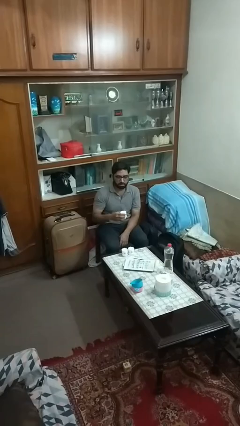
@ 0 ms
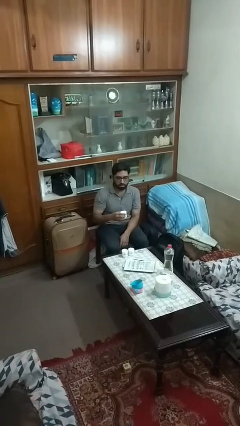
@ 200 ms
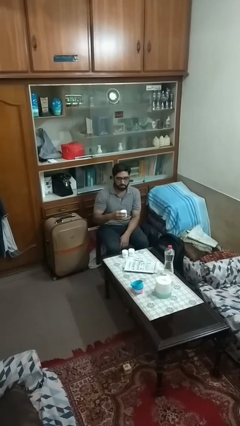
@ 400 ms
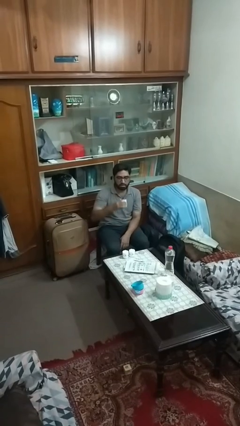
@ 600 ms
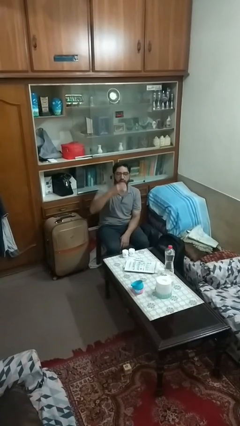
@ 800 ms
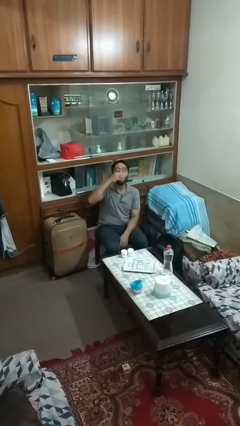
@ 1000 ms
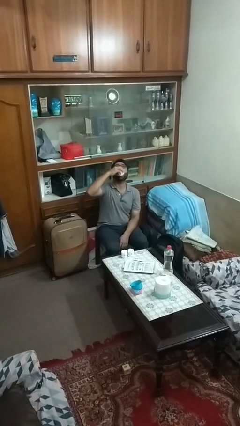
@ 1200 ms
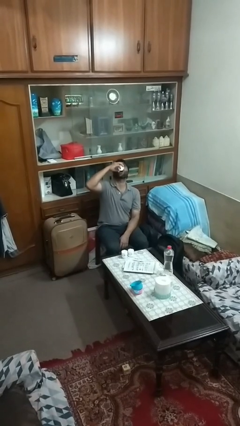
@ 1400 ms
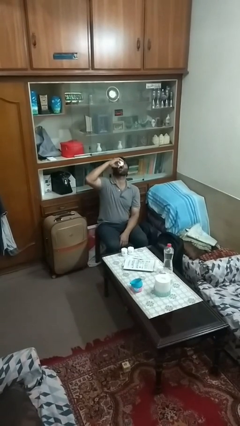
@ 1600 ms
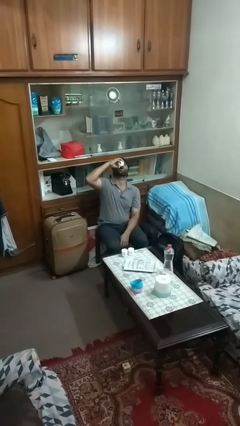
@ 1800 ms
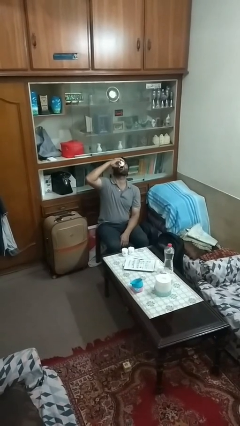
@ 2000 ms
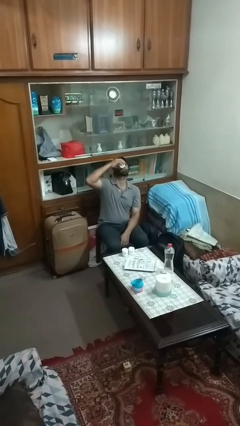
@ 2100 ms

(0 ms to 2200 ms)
person drinks from shotglass

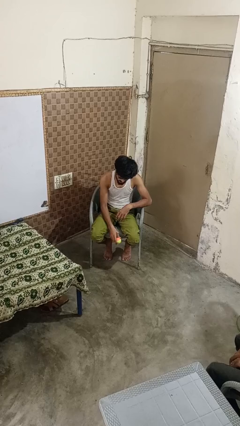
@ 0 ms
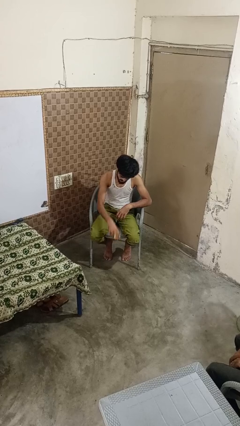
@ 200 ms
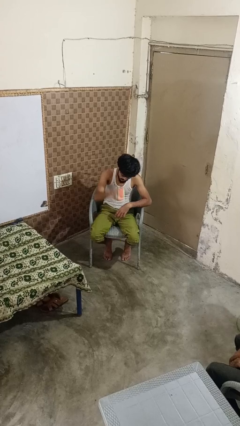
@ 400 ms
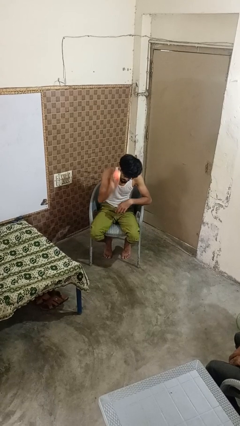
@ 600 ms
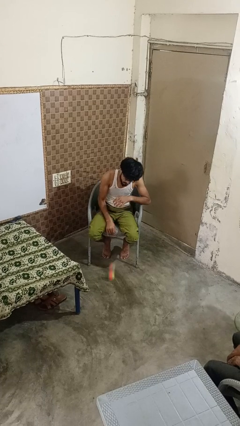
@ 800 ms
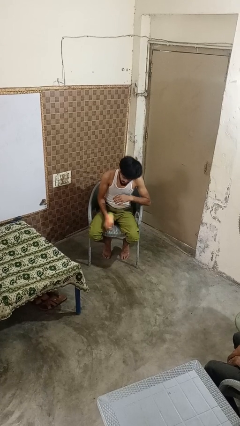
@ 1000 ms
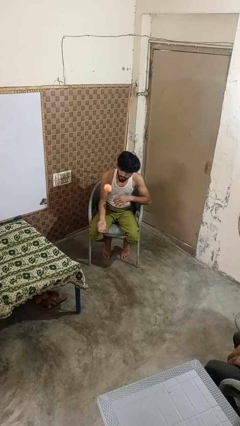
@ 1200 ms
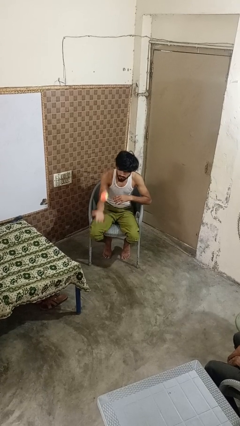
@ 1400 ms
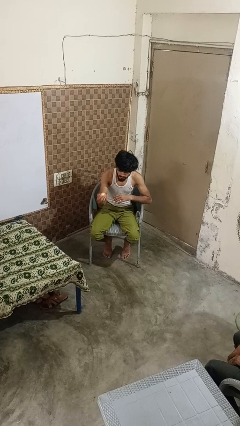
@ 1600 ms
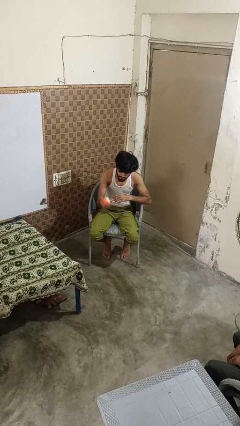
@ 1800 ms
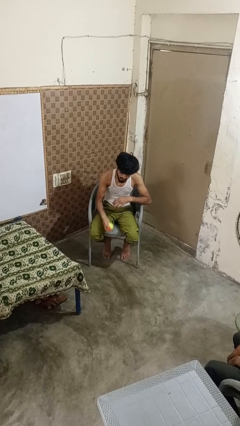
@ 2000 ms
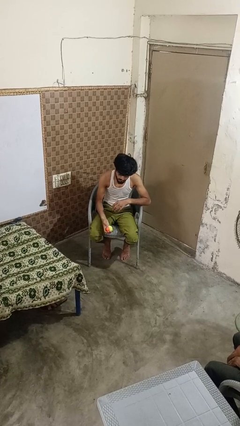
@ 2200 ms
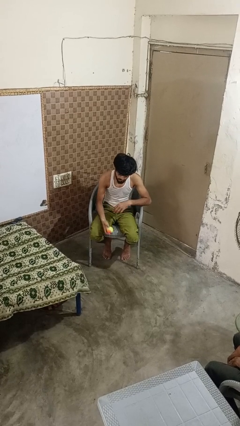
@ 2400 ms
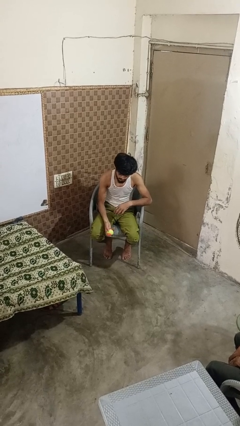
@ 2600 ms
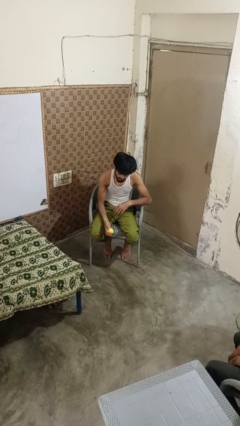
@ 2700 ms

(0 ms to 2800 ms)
person bounces ball on floor

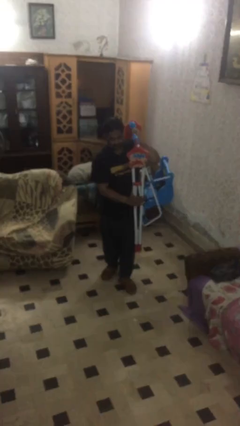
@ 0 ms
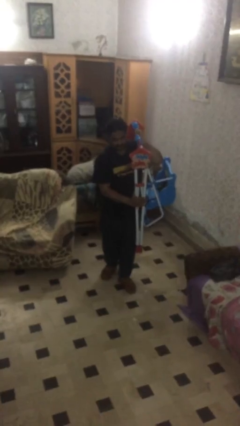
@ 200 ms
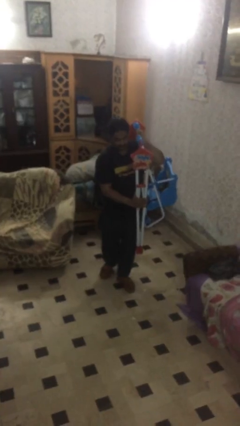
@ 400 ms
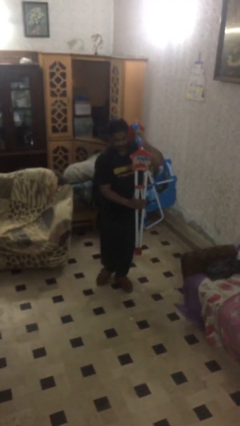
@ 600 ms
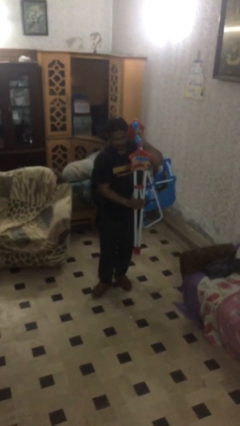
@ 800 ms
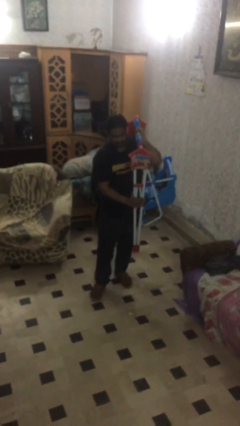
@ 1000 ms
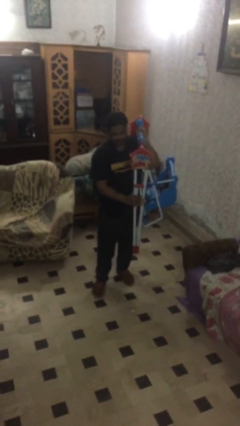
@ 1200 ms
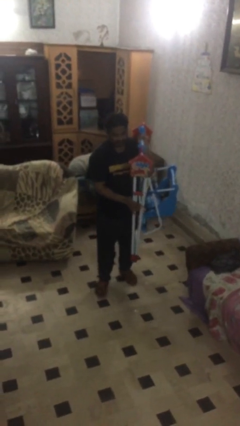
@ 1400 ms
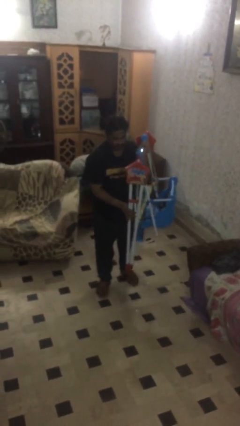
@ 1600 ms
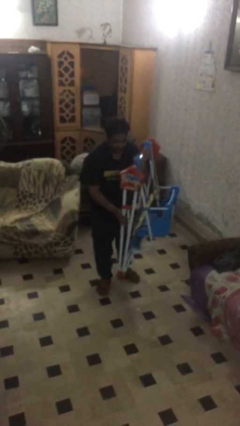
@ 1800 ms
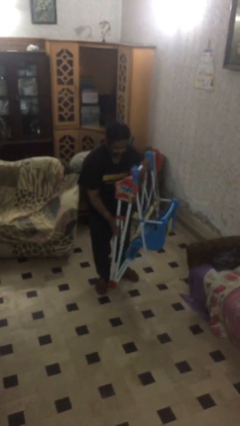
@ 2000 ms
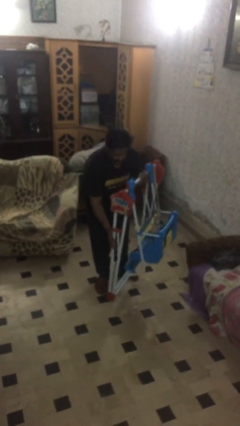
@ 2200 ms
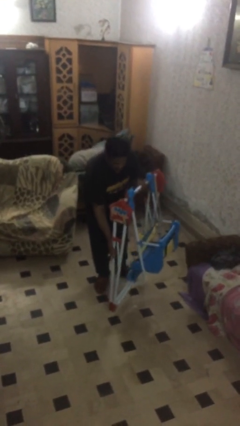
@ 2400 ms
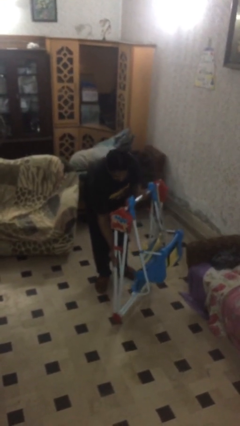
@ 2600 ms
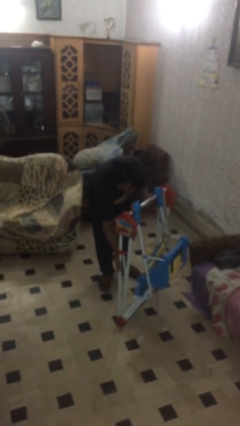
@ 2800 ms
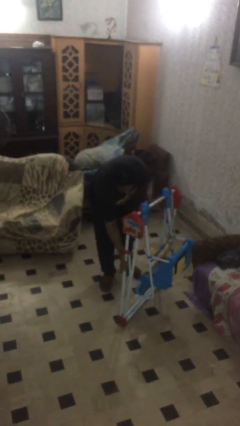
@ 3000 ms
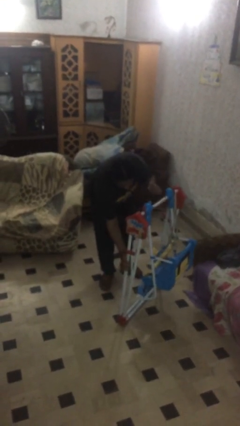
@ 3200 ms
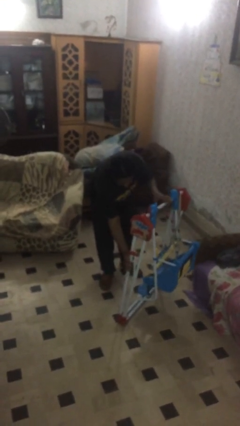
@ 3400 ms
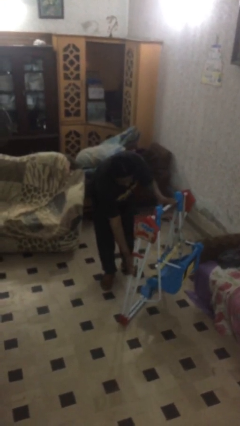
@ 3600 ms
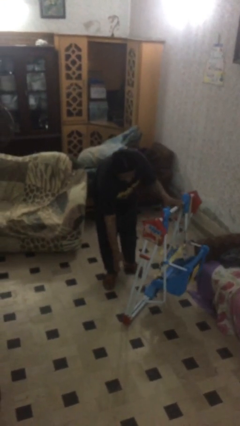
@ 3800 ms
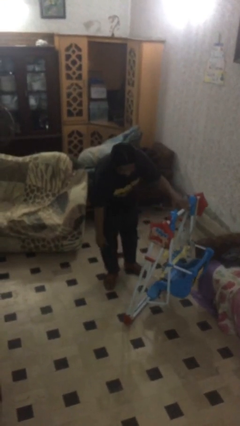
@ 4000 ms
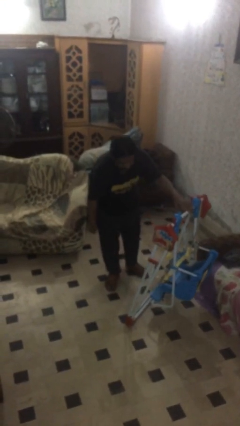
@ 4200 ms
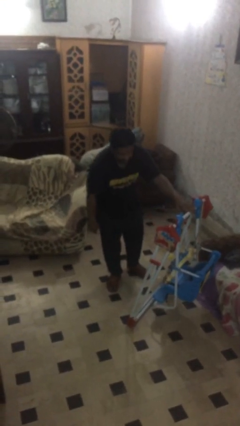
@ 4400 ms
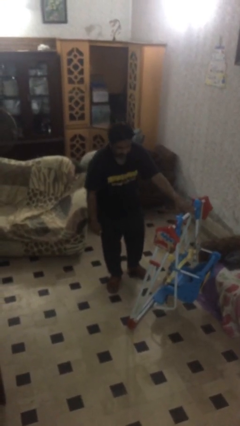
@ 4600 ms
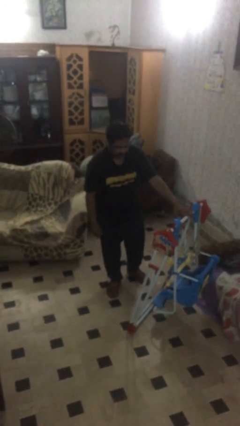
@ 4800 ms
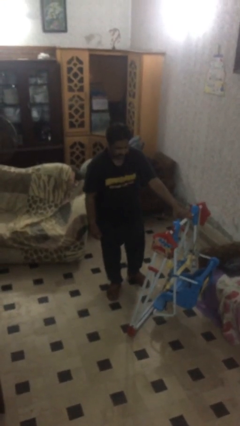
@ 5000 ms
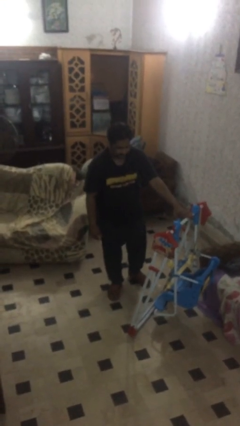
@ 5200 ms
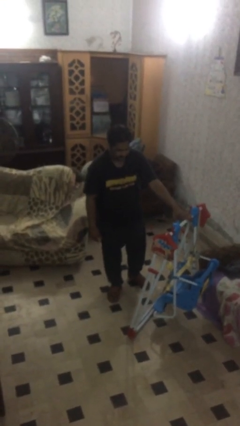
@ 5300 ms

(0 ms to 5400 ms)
person puts down object on floor

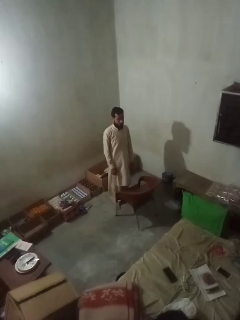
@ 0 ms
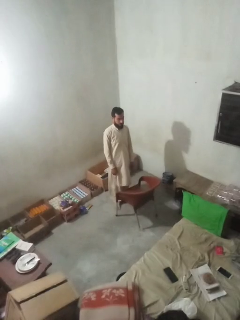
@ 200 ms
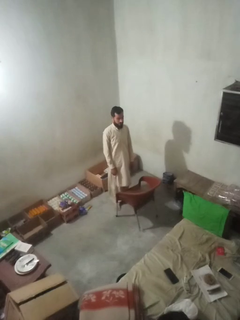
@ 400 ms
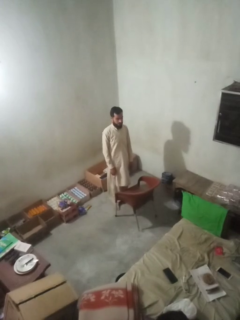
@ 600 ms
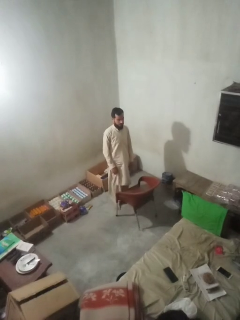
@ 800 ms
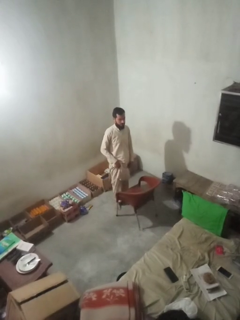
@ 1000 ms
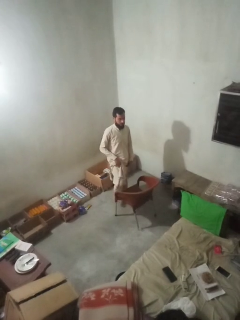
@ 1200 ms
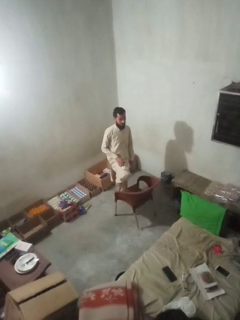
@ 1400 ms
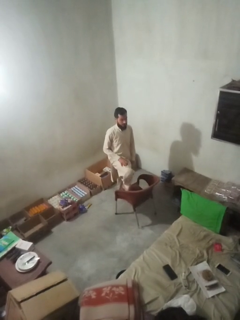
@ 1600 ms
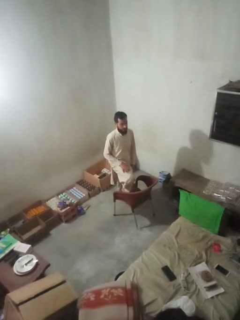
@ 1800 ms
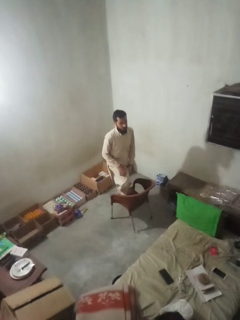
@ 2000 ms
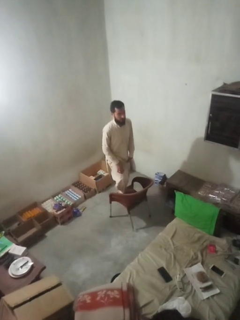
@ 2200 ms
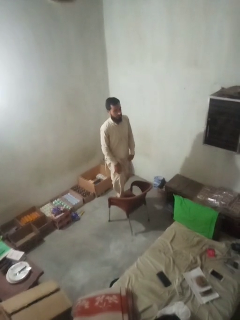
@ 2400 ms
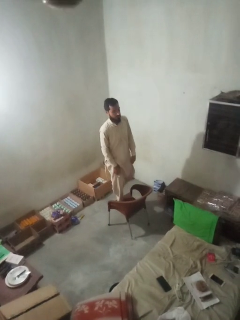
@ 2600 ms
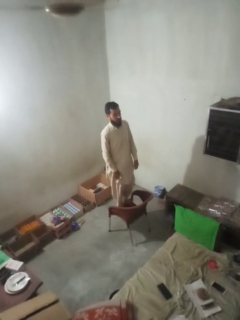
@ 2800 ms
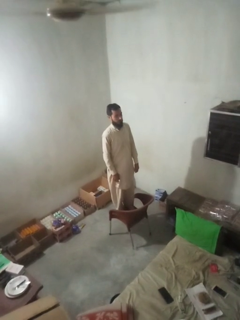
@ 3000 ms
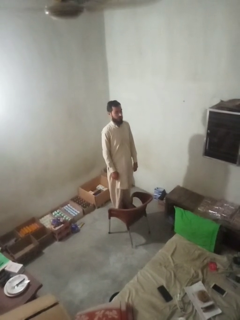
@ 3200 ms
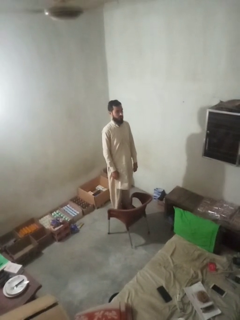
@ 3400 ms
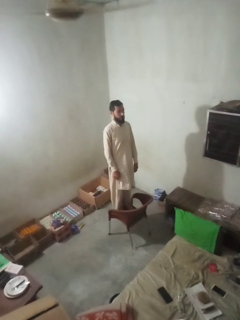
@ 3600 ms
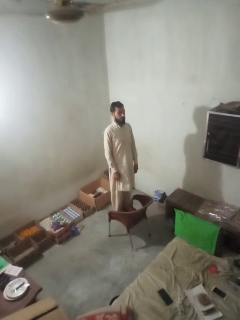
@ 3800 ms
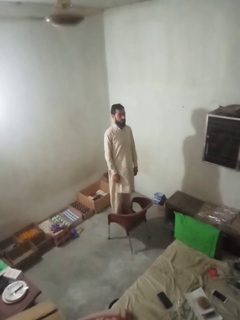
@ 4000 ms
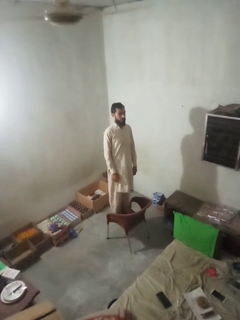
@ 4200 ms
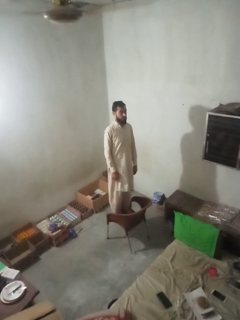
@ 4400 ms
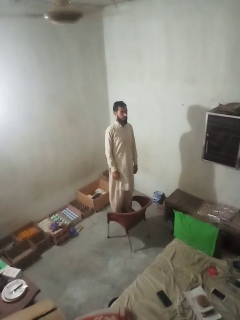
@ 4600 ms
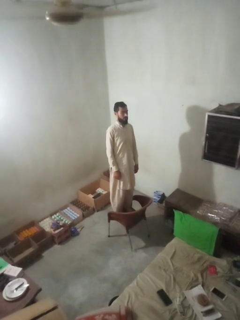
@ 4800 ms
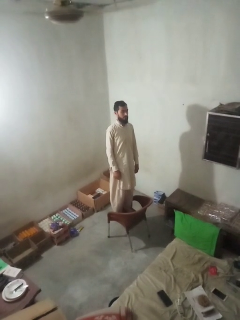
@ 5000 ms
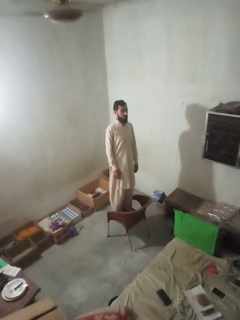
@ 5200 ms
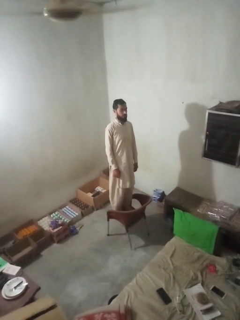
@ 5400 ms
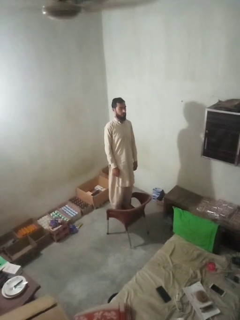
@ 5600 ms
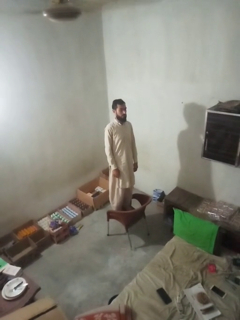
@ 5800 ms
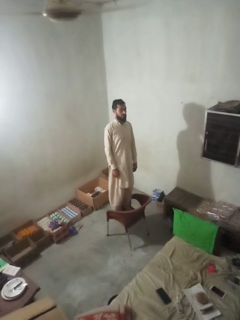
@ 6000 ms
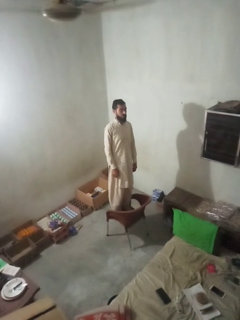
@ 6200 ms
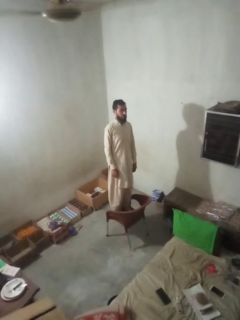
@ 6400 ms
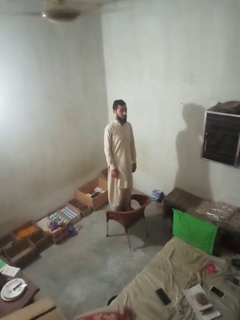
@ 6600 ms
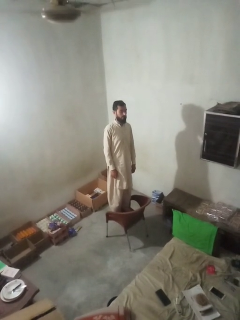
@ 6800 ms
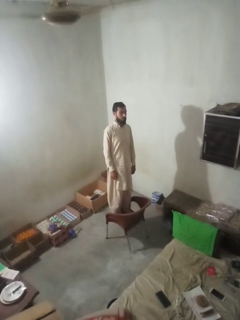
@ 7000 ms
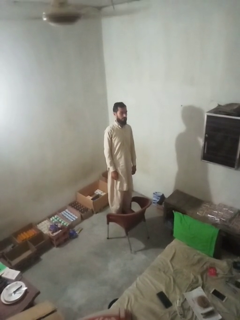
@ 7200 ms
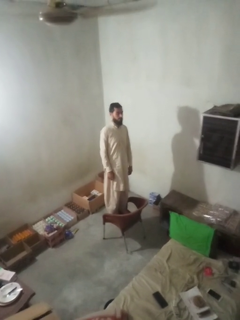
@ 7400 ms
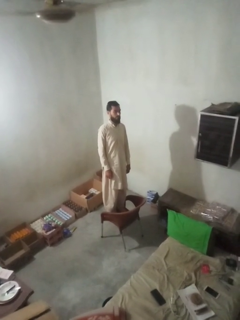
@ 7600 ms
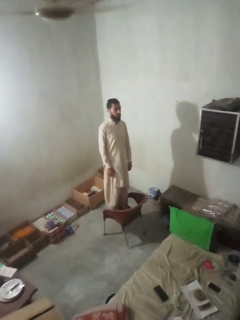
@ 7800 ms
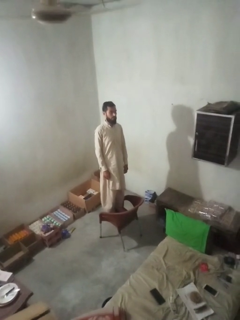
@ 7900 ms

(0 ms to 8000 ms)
person climbs on chair

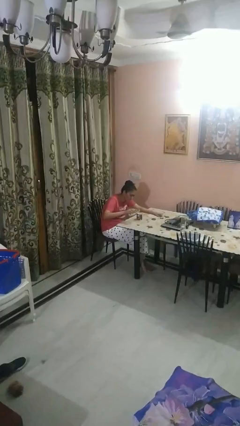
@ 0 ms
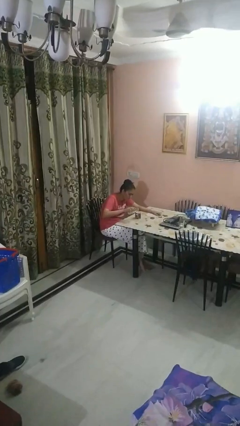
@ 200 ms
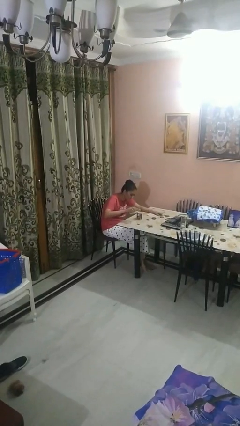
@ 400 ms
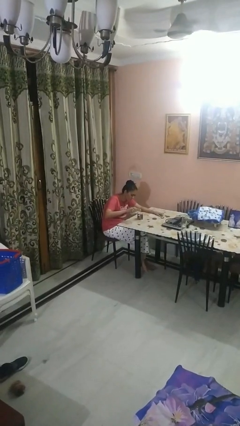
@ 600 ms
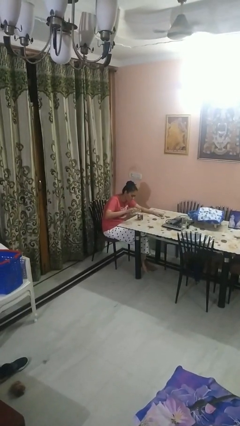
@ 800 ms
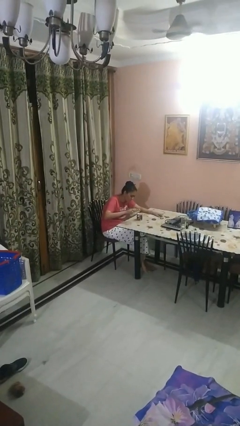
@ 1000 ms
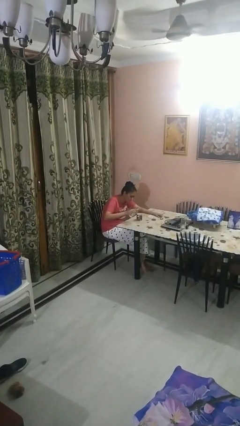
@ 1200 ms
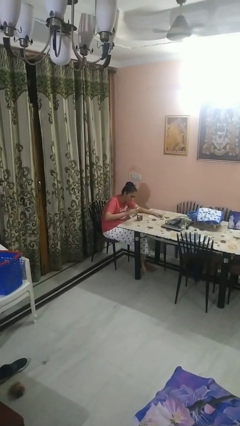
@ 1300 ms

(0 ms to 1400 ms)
person pours liquid into cup
